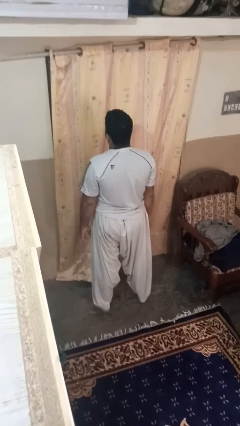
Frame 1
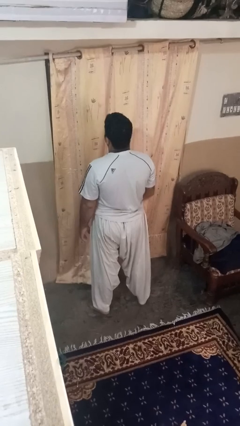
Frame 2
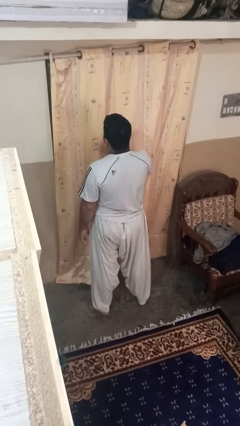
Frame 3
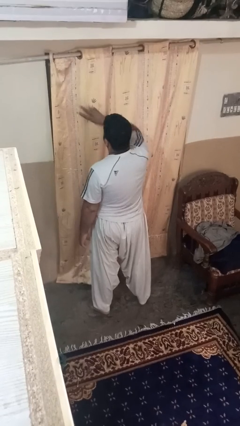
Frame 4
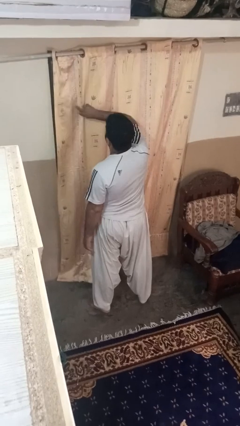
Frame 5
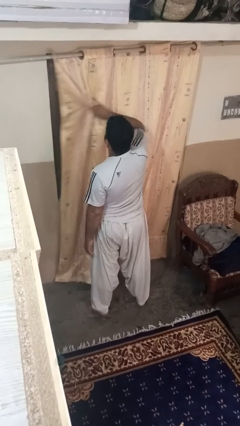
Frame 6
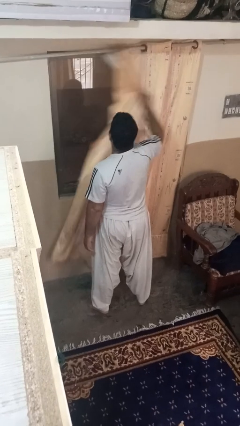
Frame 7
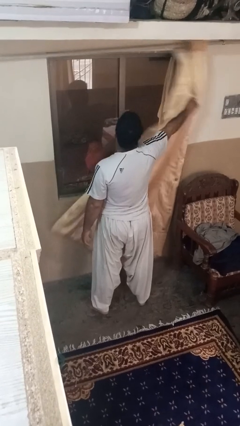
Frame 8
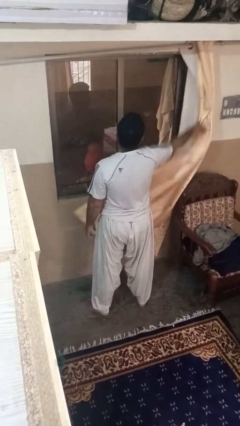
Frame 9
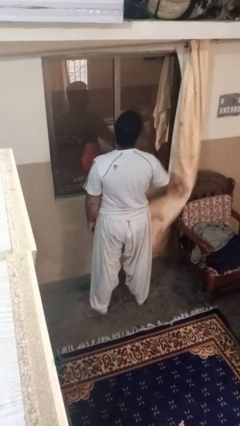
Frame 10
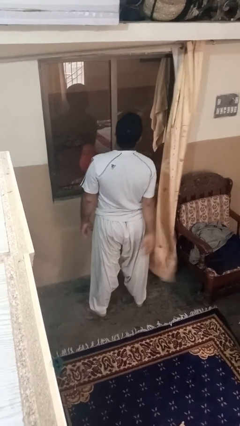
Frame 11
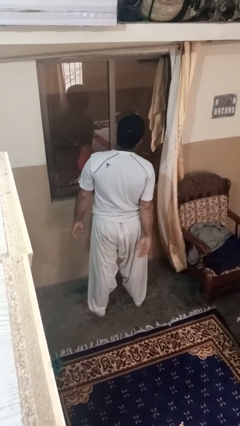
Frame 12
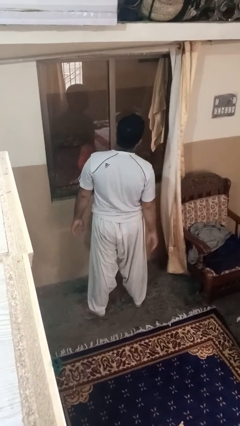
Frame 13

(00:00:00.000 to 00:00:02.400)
person opens curtains

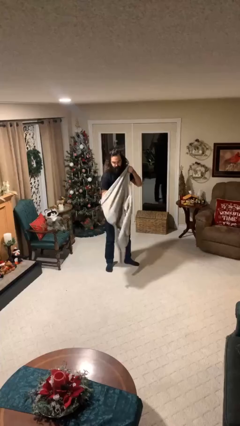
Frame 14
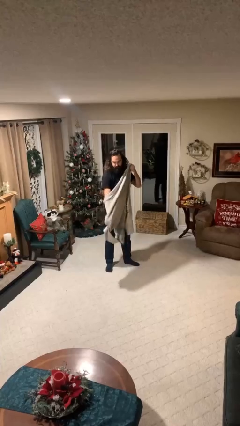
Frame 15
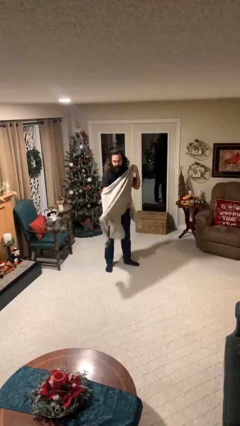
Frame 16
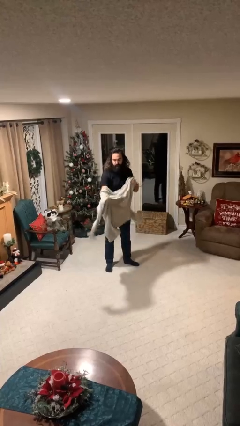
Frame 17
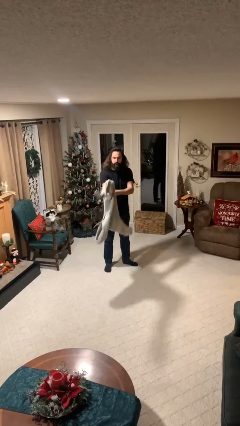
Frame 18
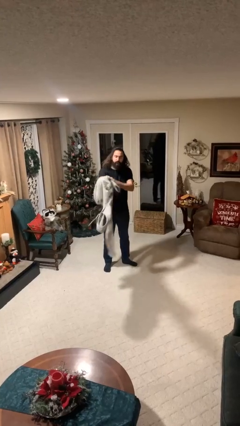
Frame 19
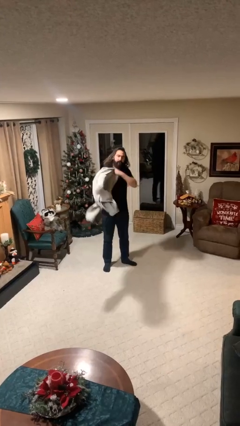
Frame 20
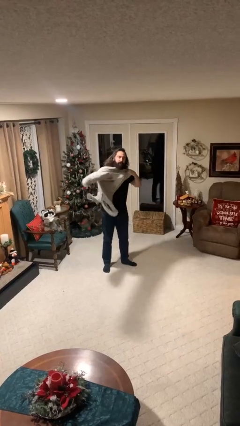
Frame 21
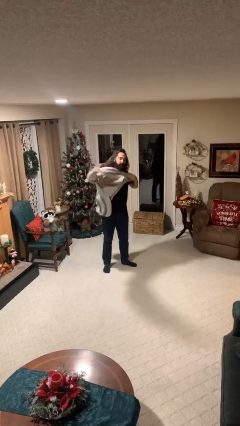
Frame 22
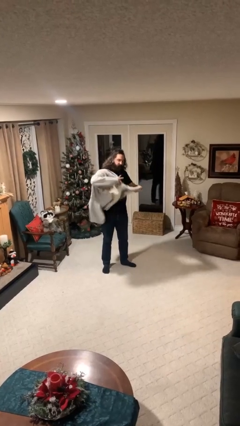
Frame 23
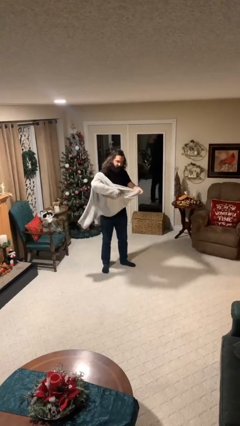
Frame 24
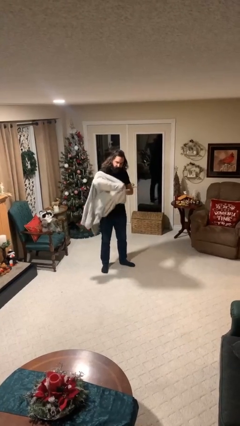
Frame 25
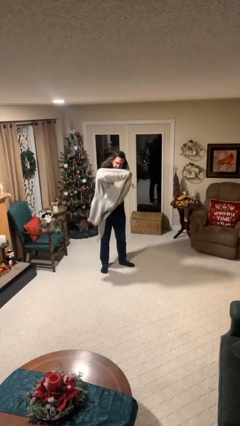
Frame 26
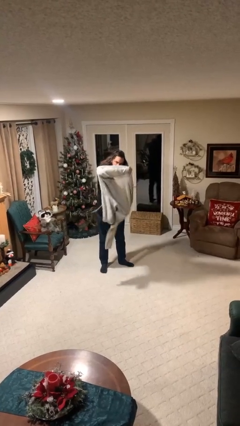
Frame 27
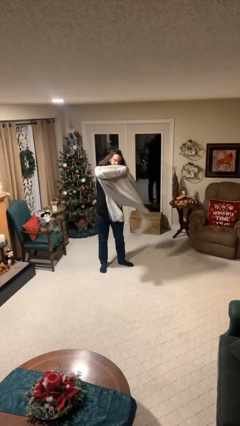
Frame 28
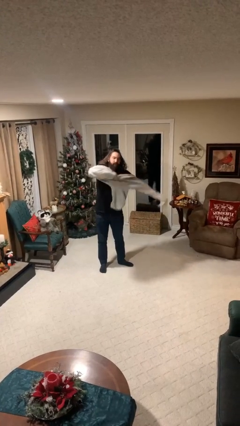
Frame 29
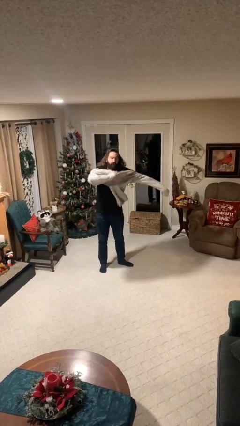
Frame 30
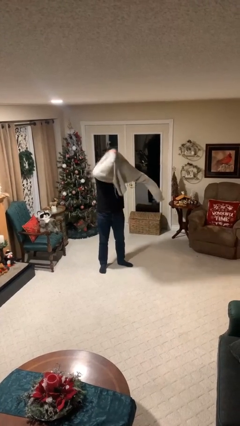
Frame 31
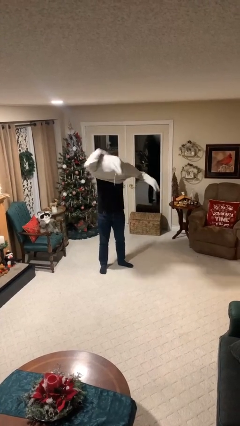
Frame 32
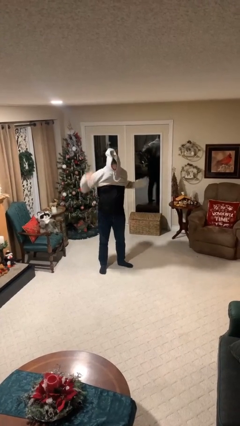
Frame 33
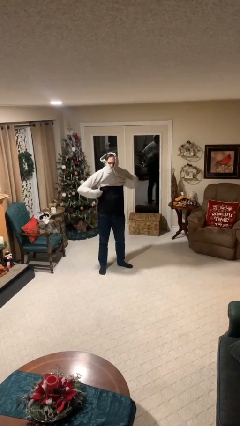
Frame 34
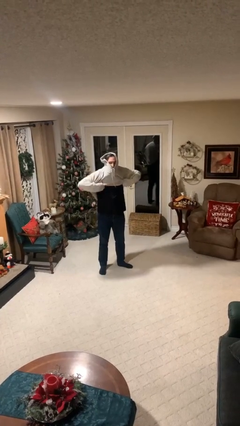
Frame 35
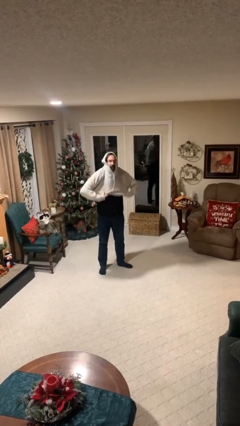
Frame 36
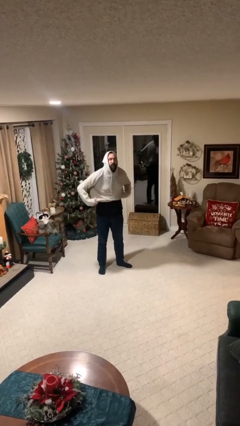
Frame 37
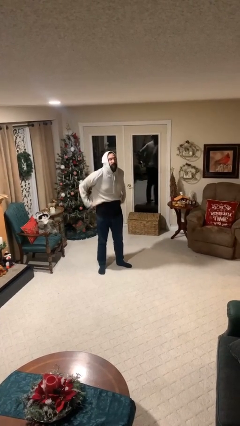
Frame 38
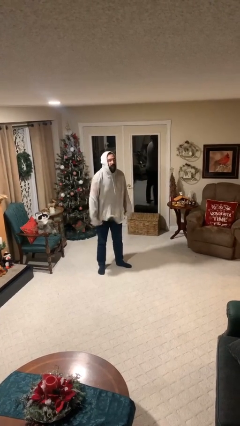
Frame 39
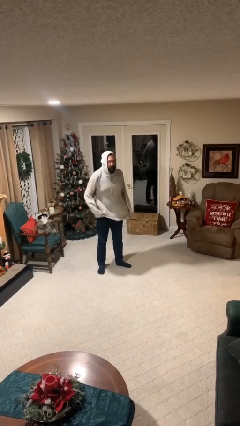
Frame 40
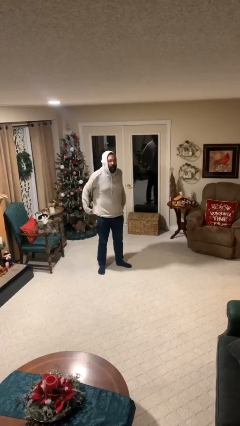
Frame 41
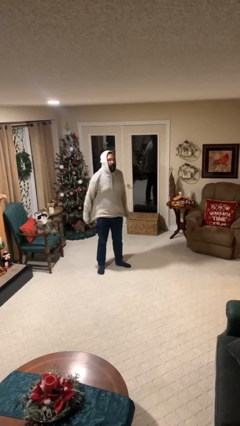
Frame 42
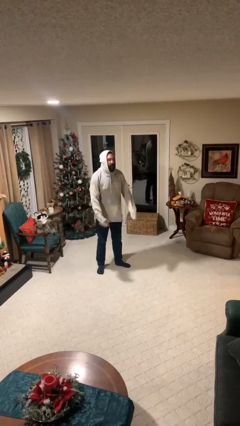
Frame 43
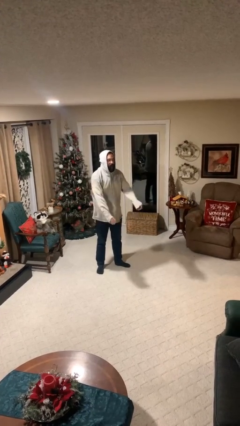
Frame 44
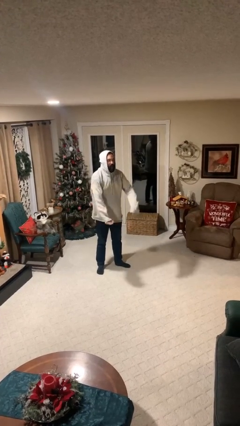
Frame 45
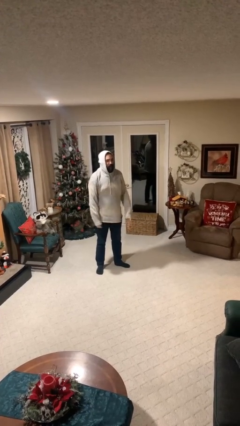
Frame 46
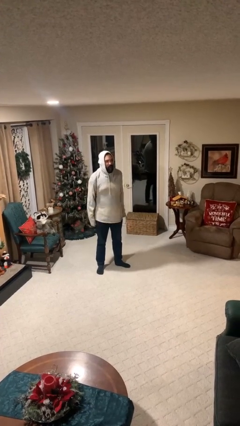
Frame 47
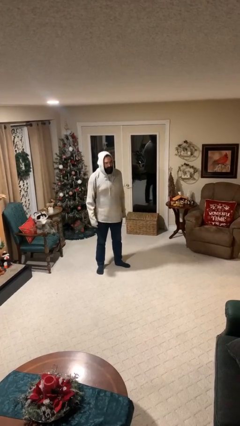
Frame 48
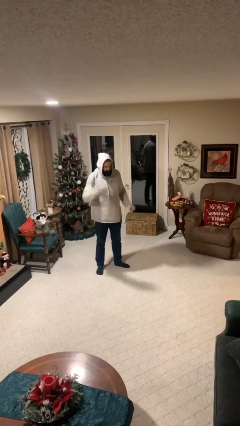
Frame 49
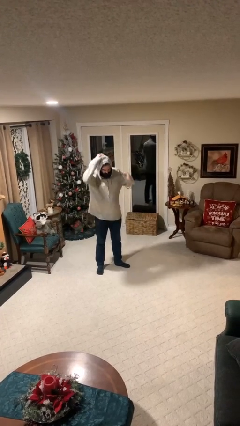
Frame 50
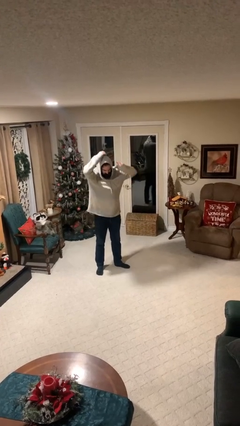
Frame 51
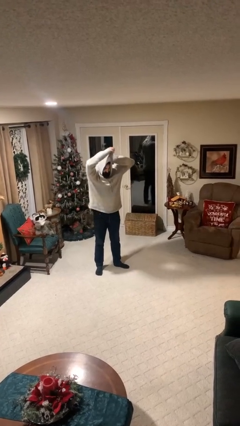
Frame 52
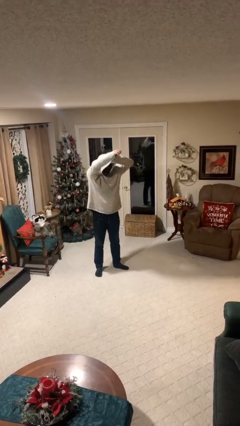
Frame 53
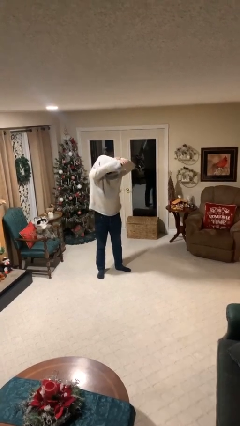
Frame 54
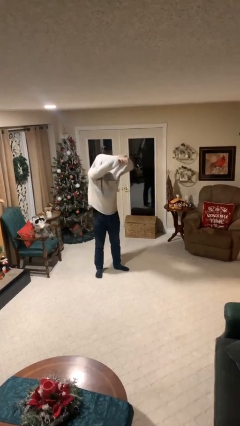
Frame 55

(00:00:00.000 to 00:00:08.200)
person puts on hoodie

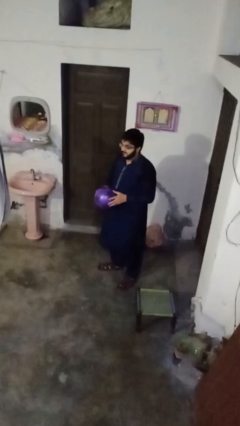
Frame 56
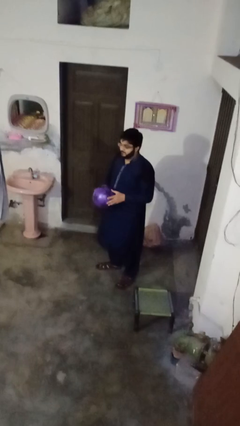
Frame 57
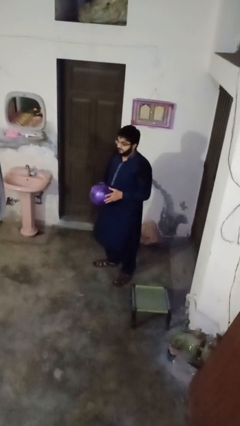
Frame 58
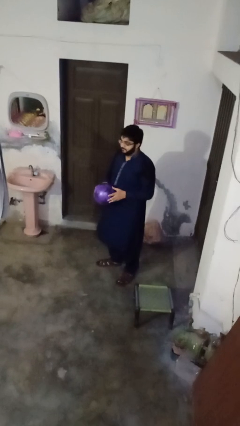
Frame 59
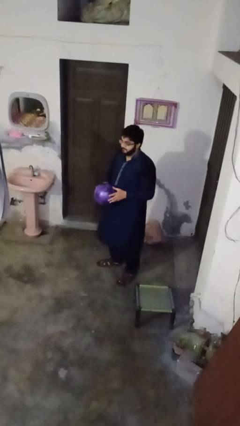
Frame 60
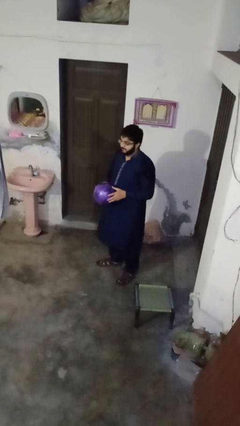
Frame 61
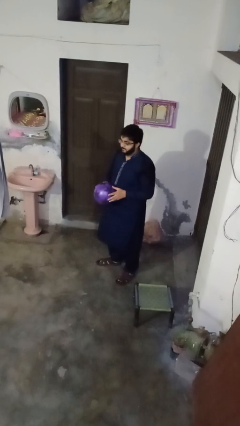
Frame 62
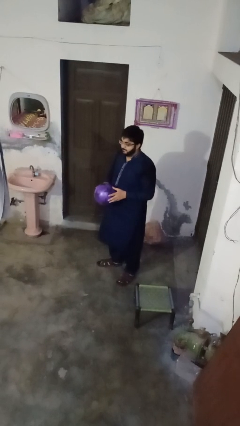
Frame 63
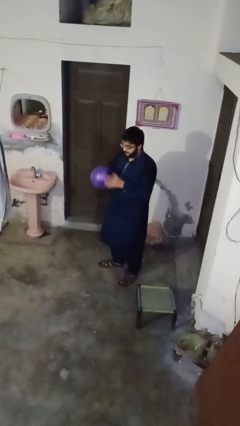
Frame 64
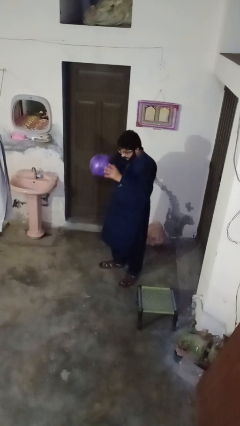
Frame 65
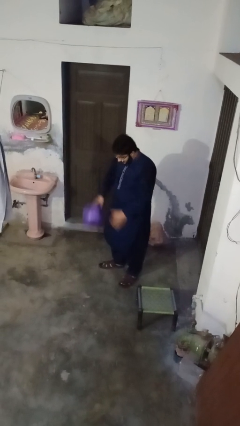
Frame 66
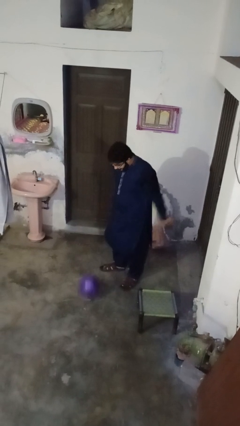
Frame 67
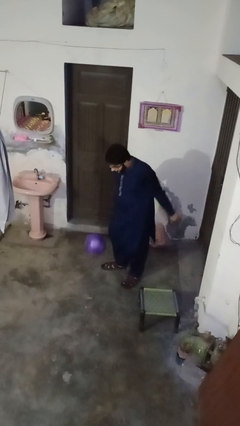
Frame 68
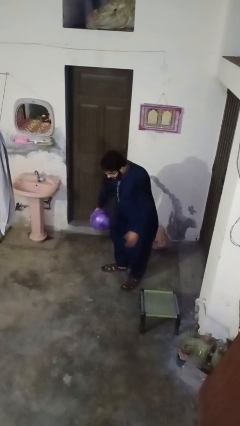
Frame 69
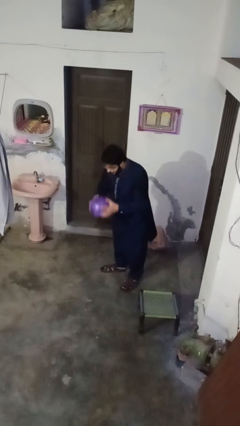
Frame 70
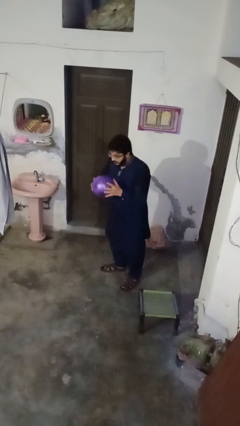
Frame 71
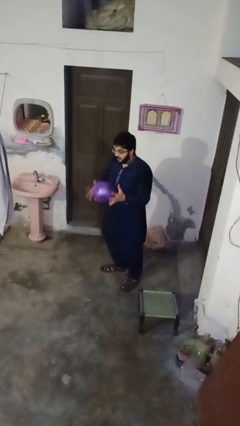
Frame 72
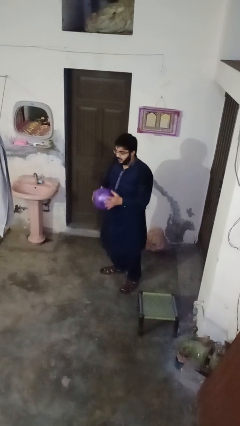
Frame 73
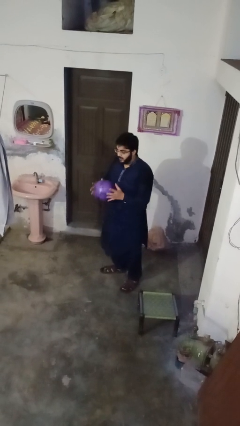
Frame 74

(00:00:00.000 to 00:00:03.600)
person bounces ball on floor

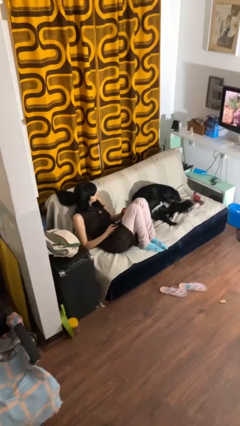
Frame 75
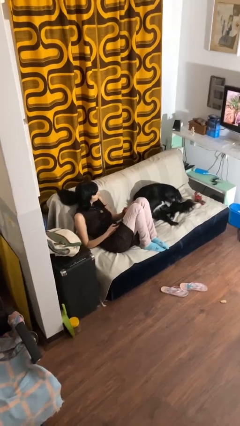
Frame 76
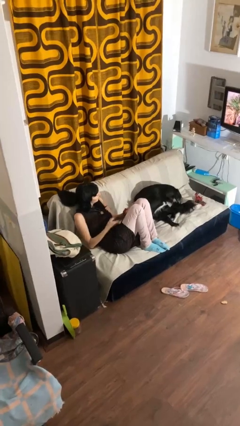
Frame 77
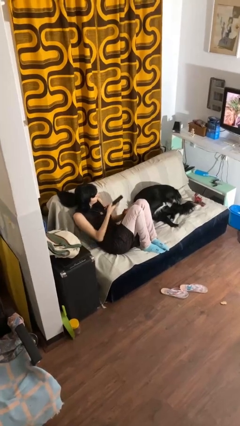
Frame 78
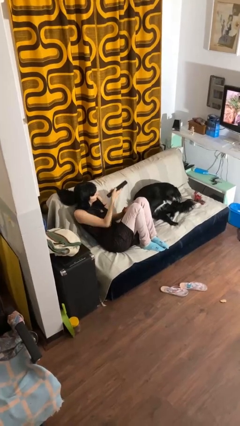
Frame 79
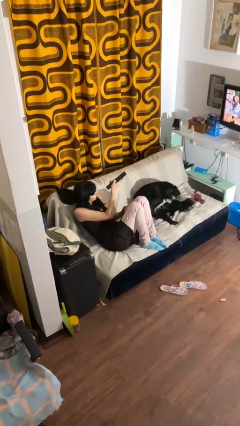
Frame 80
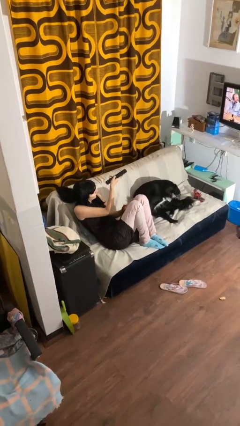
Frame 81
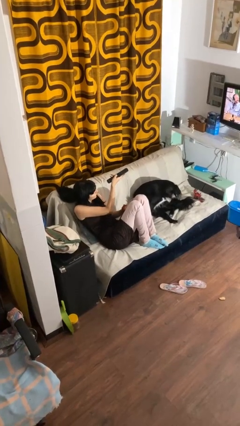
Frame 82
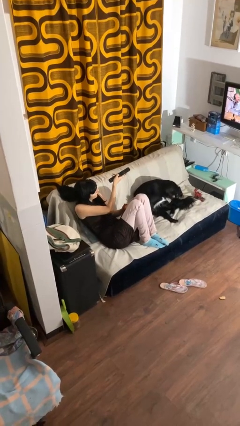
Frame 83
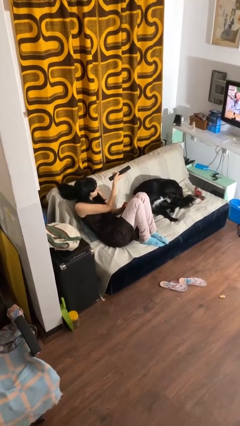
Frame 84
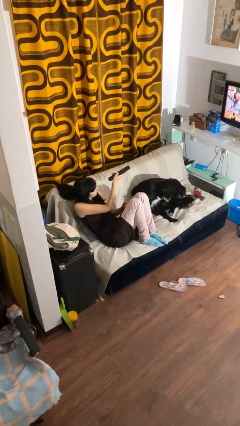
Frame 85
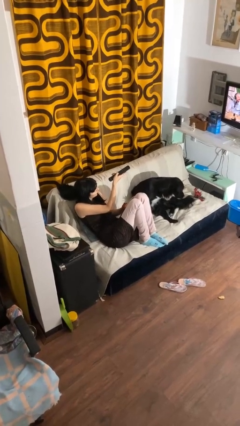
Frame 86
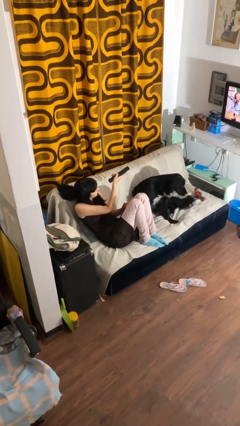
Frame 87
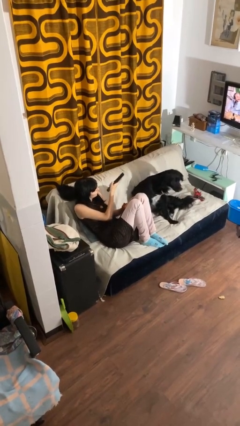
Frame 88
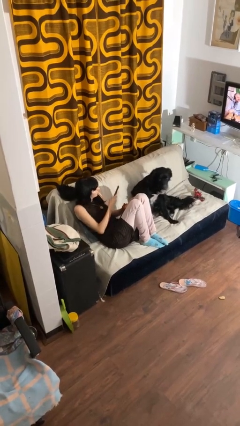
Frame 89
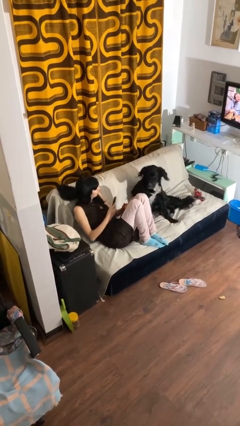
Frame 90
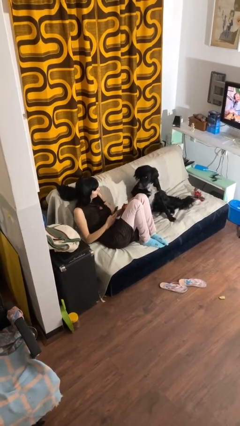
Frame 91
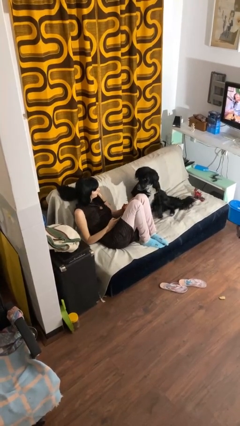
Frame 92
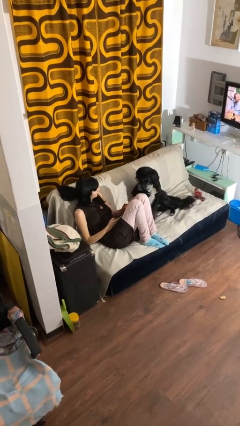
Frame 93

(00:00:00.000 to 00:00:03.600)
person uses television remote

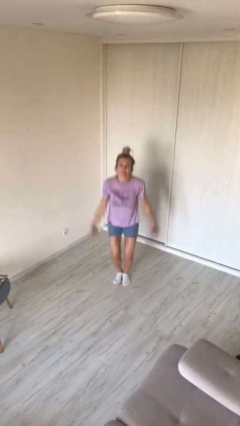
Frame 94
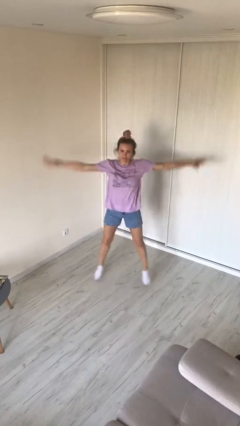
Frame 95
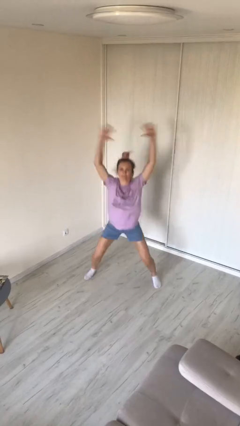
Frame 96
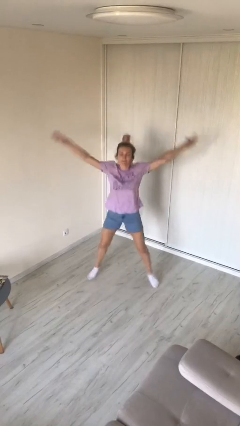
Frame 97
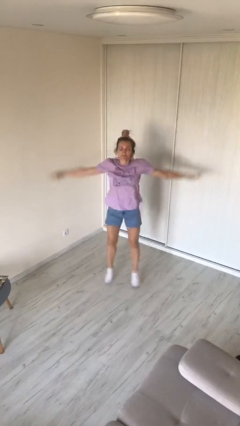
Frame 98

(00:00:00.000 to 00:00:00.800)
person exercises with jumping jacks
